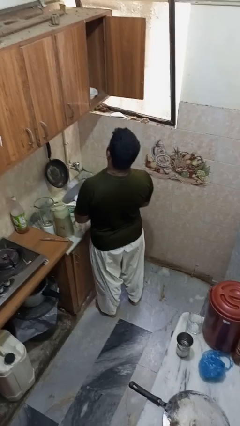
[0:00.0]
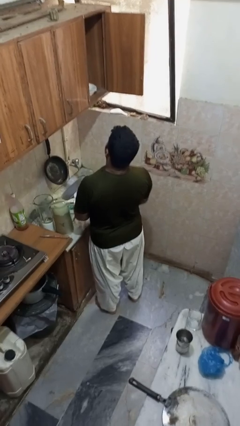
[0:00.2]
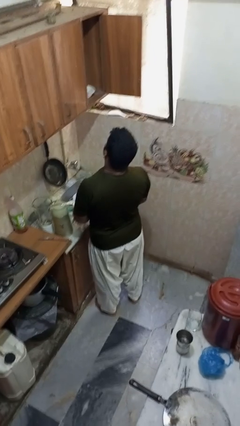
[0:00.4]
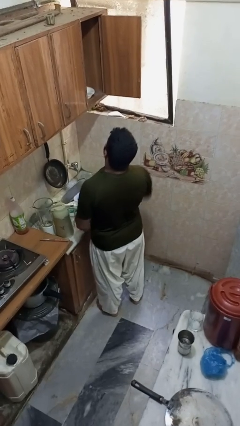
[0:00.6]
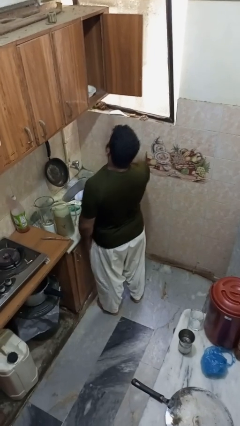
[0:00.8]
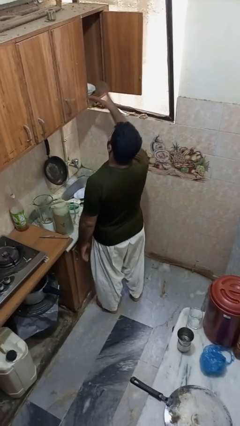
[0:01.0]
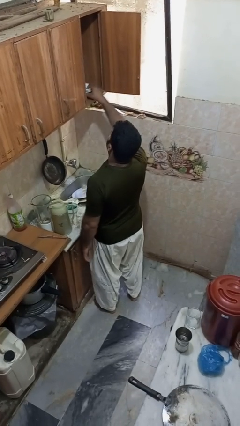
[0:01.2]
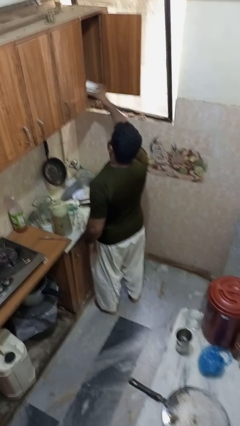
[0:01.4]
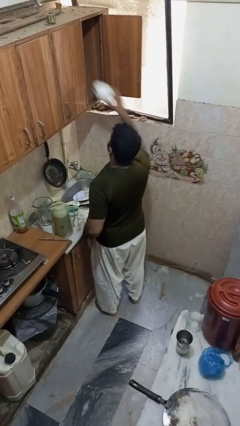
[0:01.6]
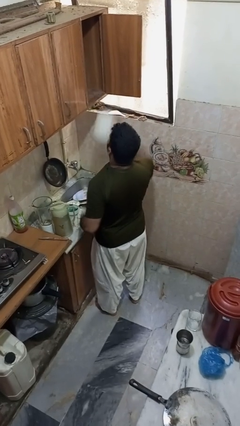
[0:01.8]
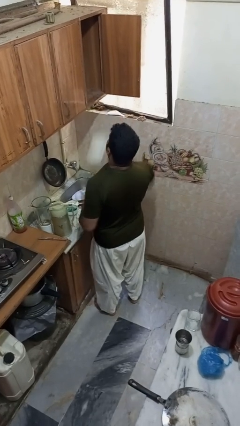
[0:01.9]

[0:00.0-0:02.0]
person takes object from cabinet

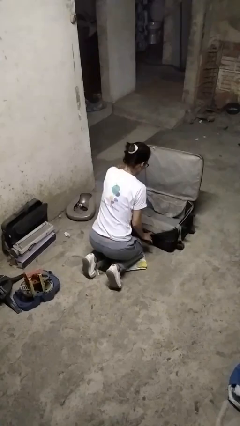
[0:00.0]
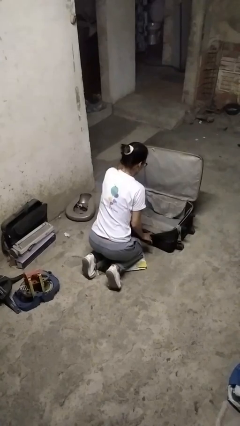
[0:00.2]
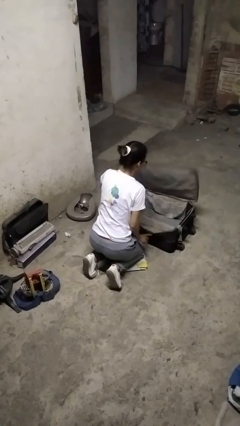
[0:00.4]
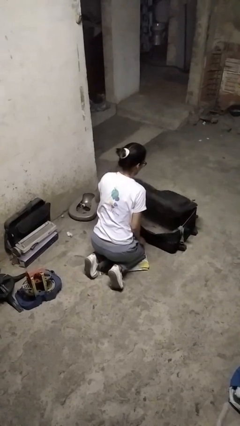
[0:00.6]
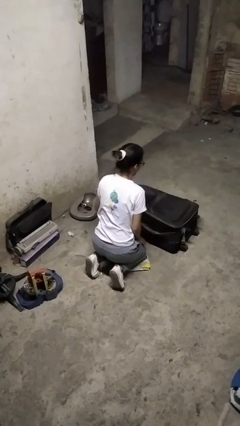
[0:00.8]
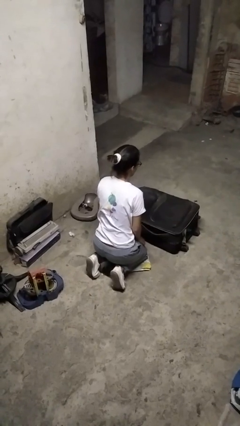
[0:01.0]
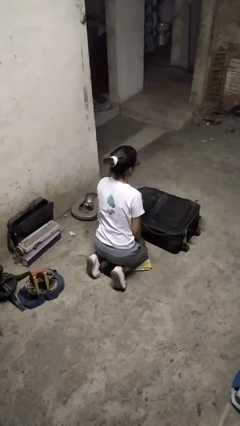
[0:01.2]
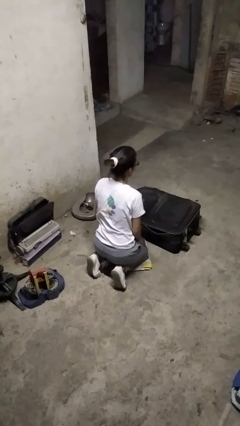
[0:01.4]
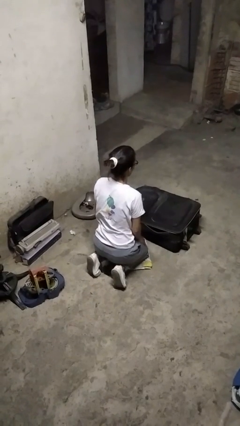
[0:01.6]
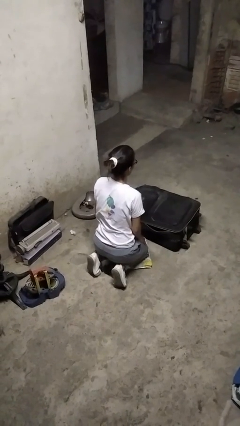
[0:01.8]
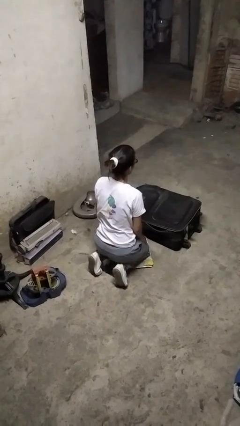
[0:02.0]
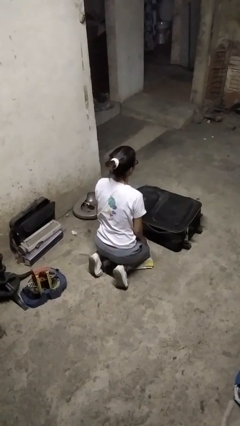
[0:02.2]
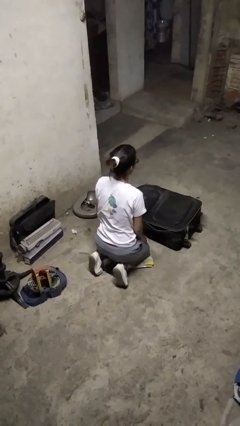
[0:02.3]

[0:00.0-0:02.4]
person closes suitcase

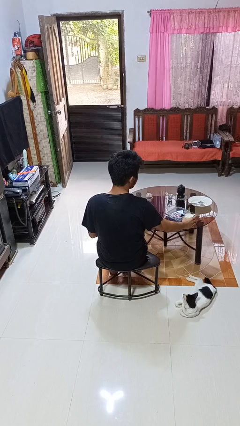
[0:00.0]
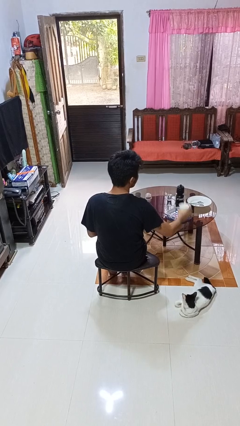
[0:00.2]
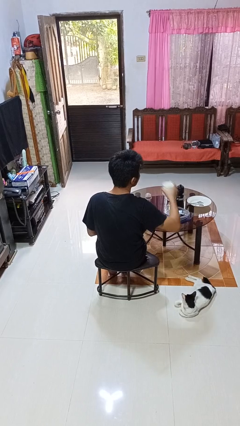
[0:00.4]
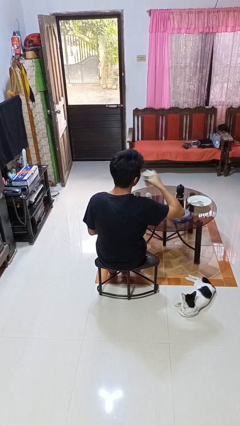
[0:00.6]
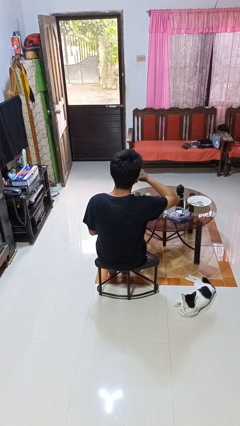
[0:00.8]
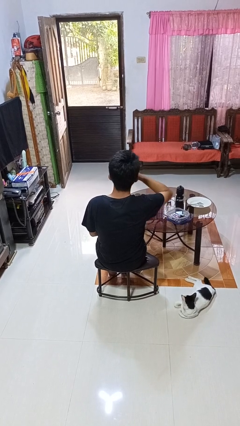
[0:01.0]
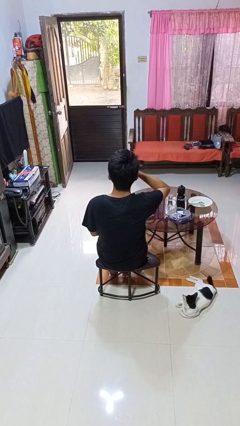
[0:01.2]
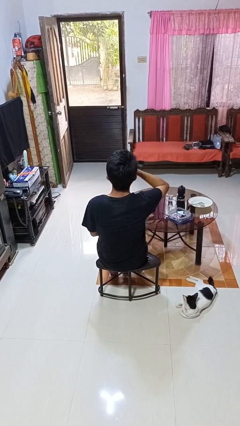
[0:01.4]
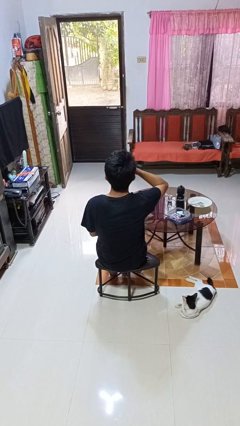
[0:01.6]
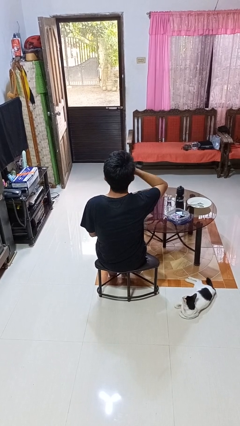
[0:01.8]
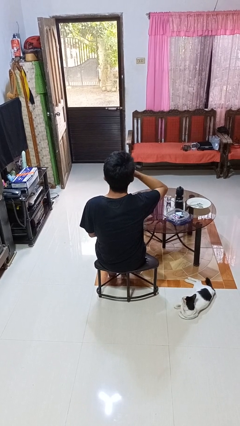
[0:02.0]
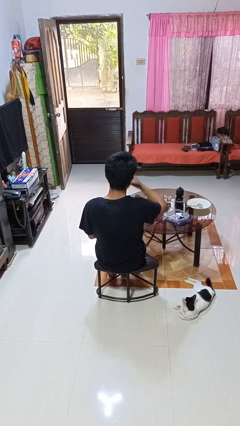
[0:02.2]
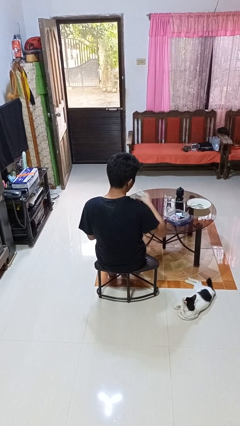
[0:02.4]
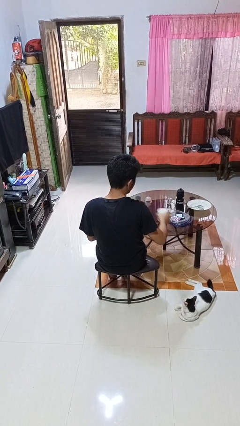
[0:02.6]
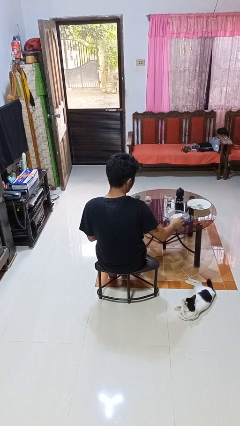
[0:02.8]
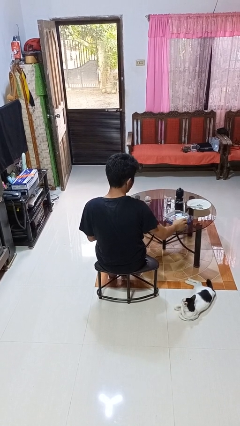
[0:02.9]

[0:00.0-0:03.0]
person drinks from cup

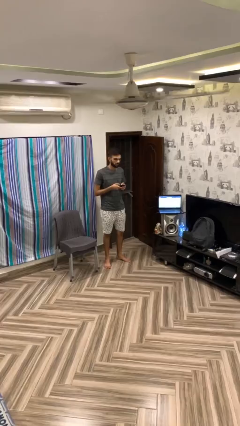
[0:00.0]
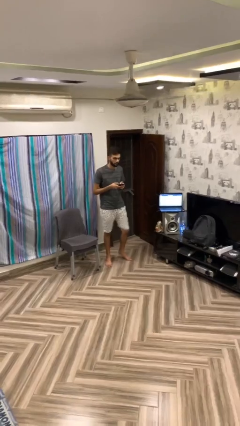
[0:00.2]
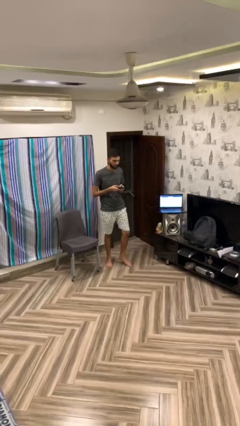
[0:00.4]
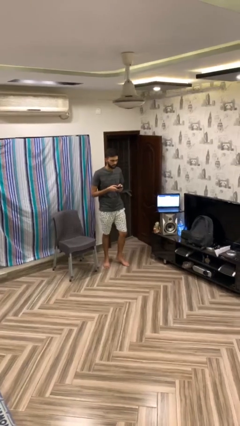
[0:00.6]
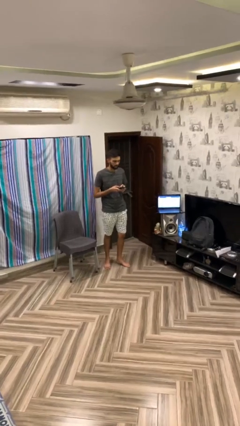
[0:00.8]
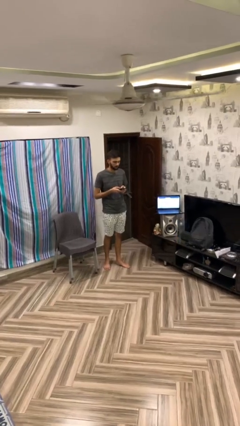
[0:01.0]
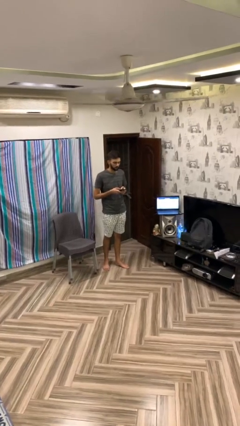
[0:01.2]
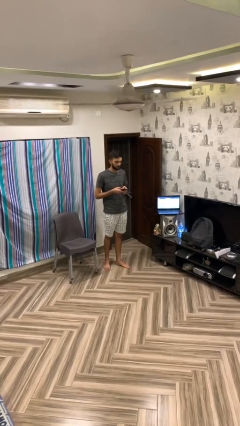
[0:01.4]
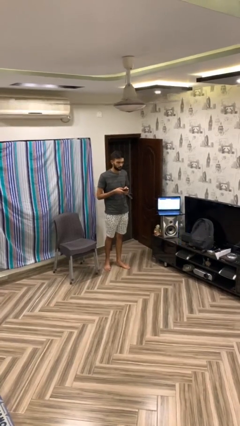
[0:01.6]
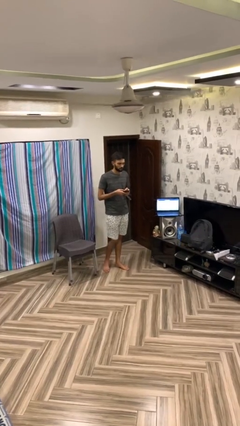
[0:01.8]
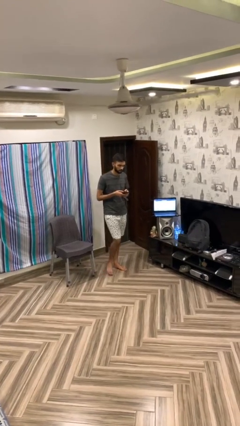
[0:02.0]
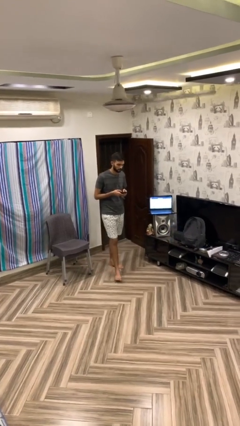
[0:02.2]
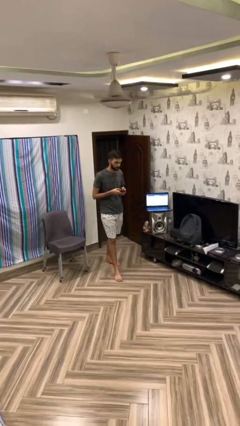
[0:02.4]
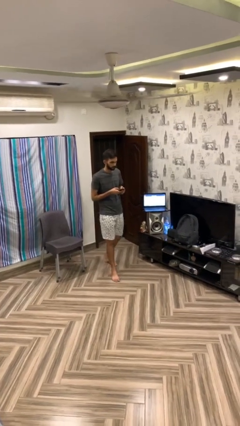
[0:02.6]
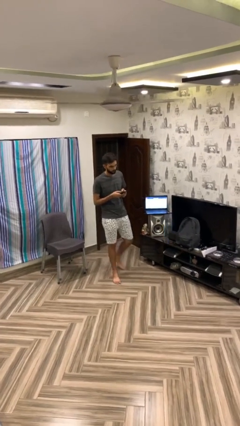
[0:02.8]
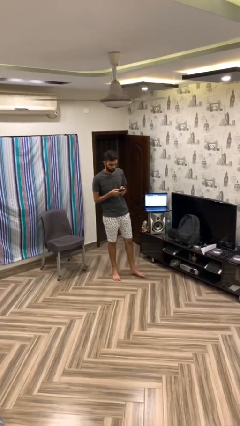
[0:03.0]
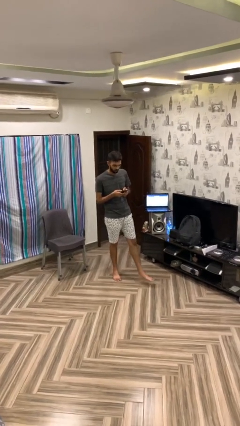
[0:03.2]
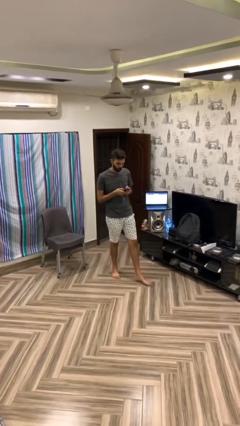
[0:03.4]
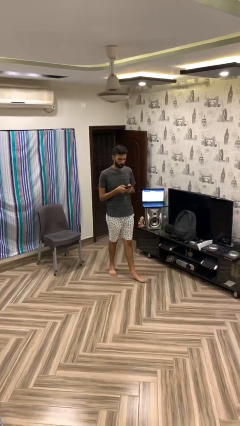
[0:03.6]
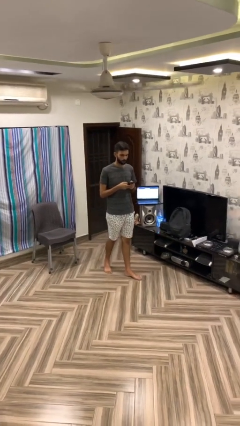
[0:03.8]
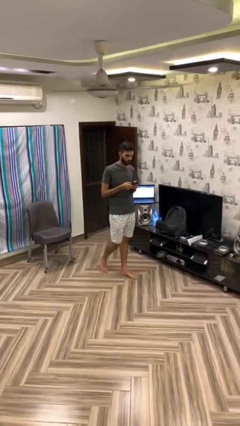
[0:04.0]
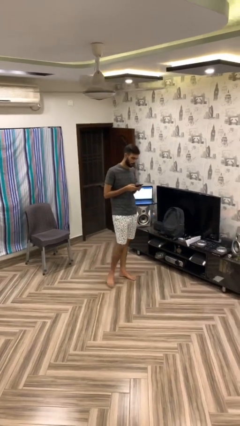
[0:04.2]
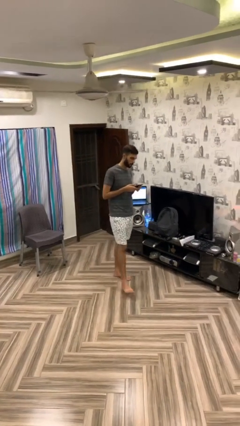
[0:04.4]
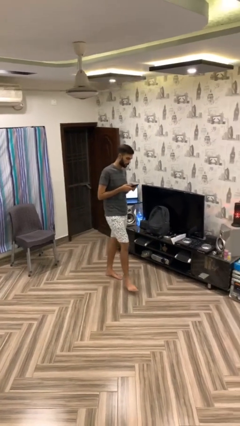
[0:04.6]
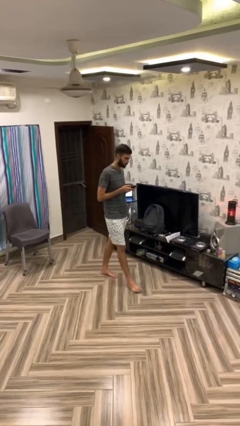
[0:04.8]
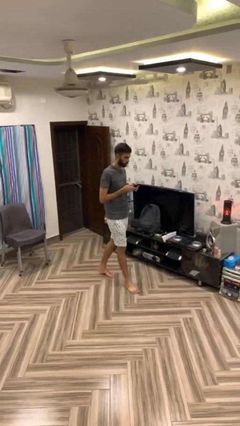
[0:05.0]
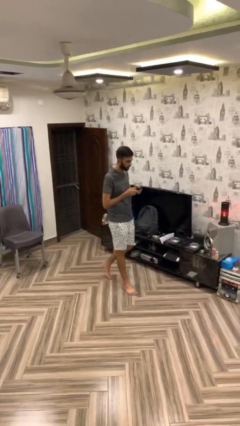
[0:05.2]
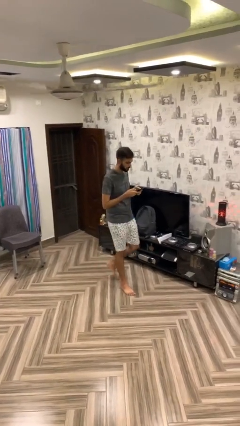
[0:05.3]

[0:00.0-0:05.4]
person texts on phone

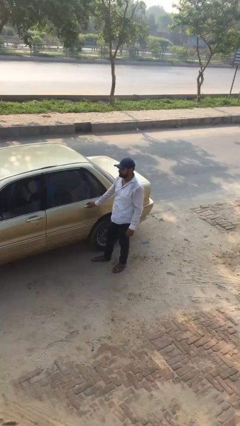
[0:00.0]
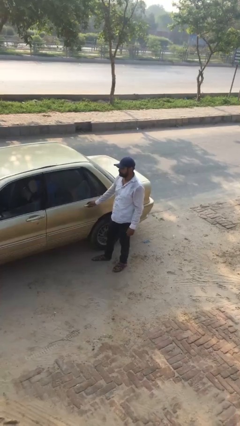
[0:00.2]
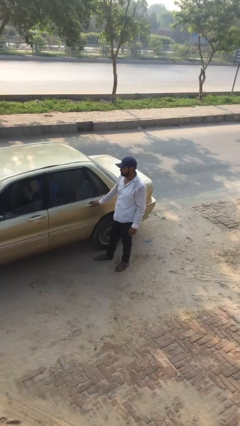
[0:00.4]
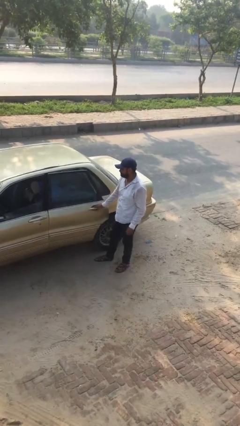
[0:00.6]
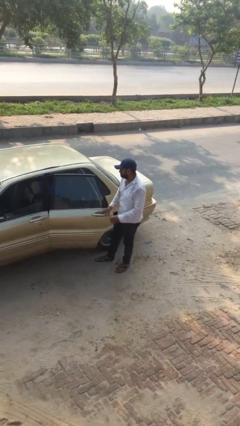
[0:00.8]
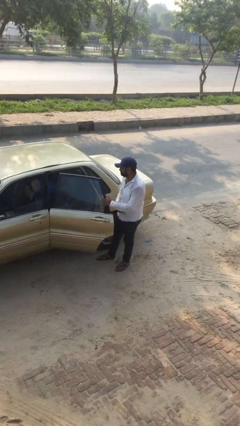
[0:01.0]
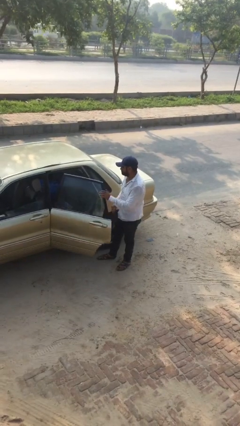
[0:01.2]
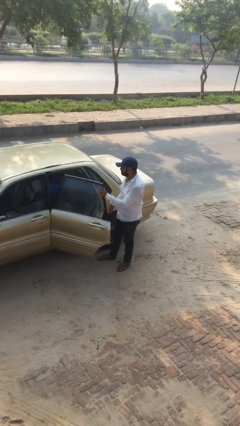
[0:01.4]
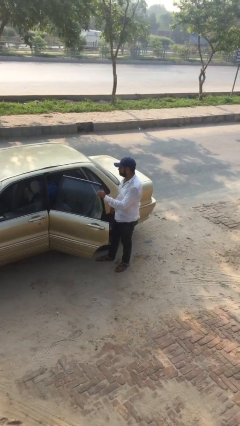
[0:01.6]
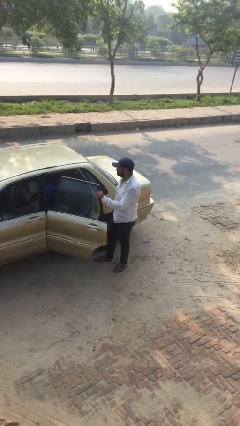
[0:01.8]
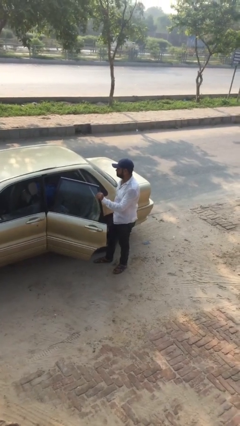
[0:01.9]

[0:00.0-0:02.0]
person opens car door

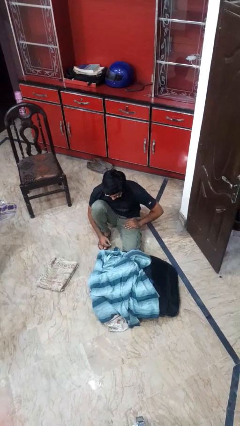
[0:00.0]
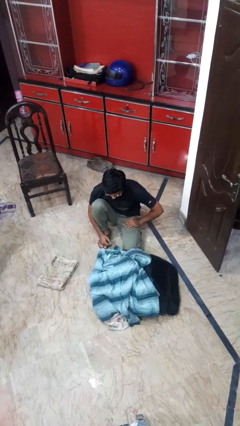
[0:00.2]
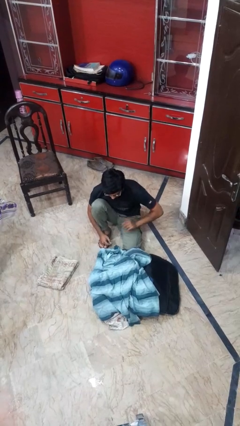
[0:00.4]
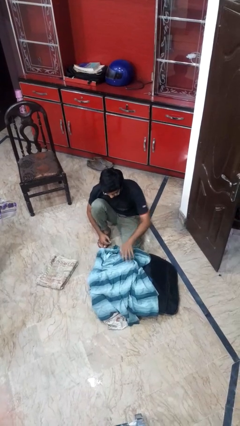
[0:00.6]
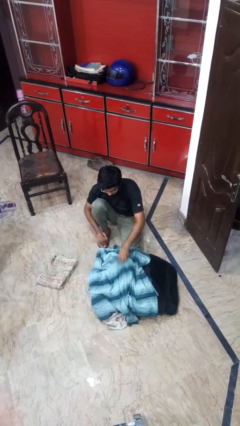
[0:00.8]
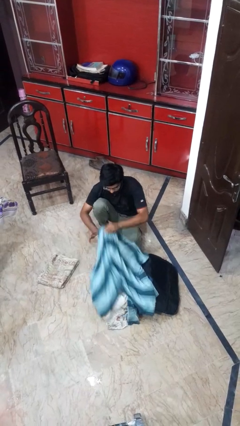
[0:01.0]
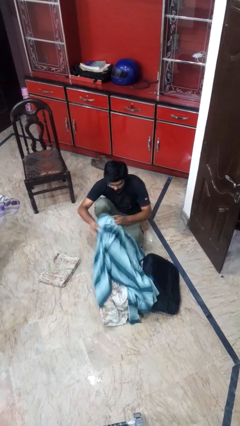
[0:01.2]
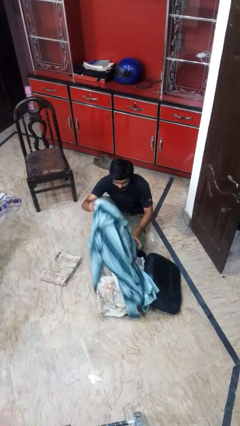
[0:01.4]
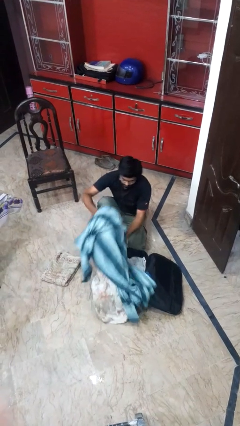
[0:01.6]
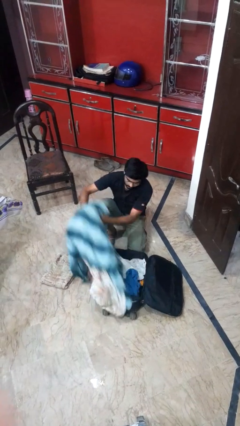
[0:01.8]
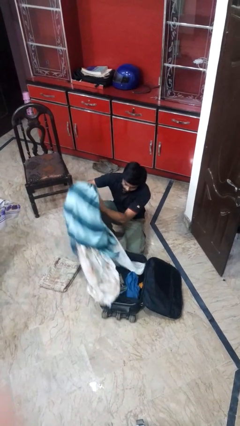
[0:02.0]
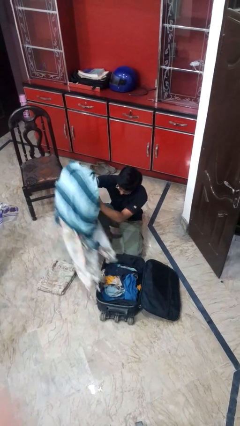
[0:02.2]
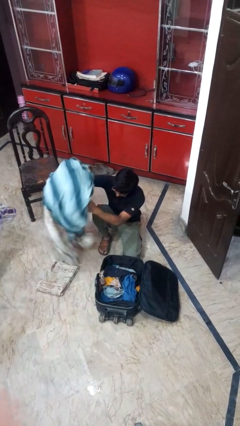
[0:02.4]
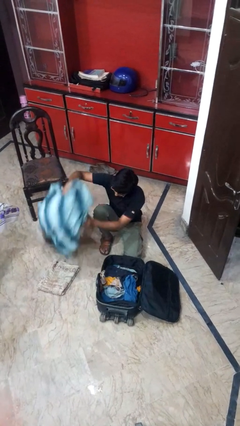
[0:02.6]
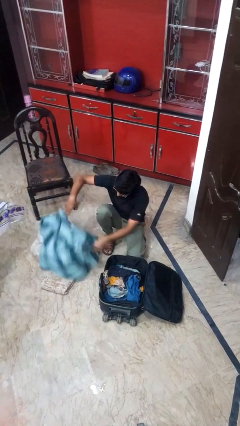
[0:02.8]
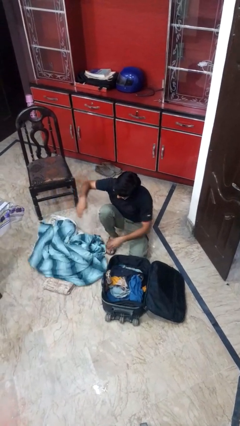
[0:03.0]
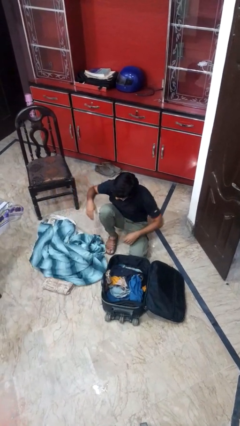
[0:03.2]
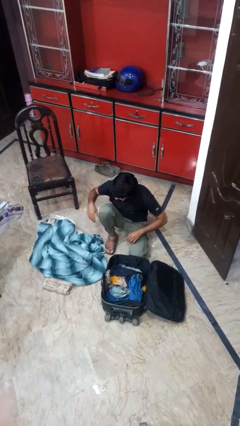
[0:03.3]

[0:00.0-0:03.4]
person unloads clothes from suitcase
